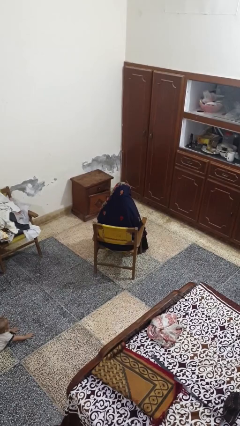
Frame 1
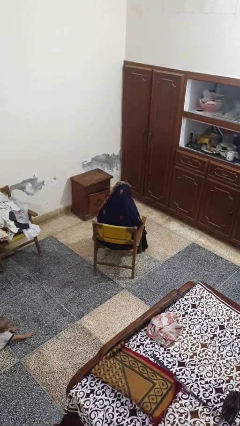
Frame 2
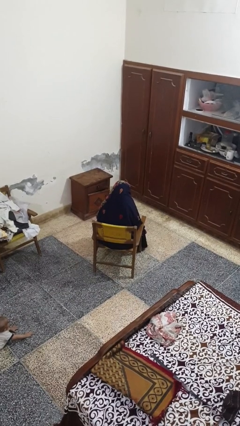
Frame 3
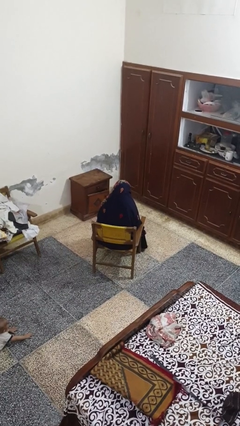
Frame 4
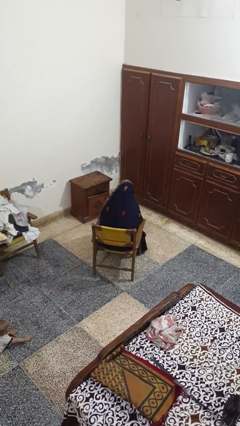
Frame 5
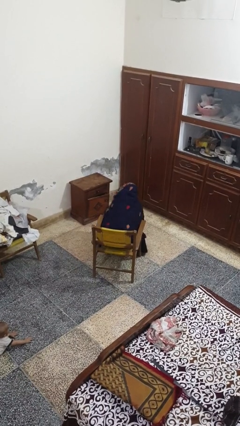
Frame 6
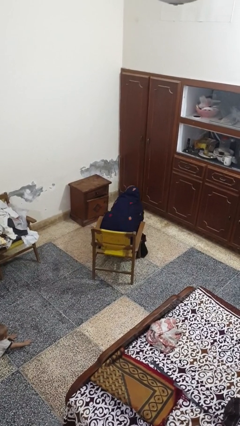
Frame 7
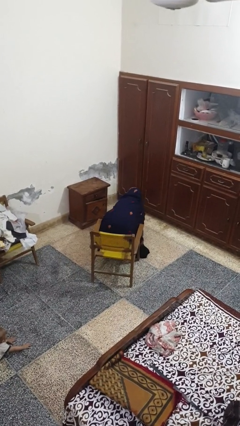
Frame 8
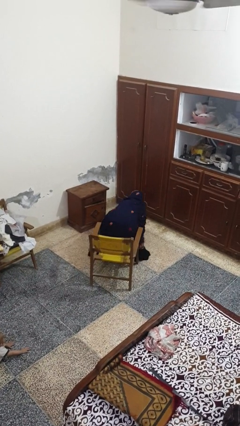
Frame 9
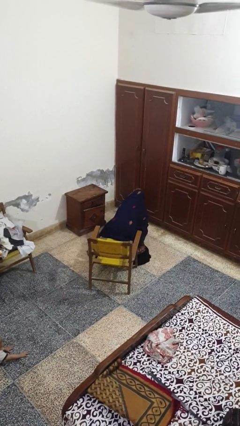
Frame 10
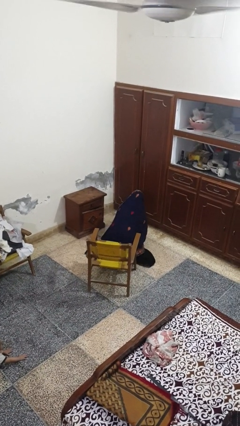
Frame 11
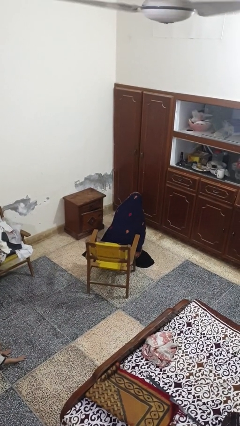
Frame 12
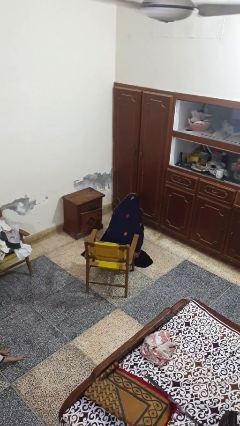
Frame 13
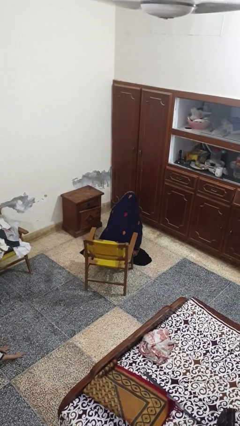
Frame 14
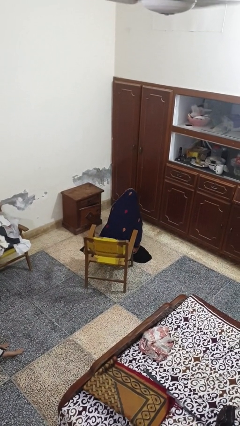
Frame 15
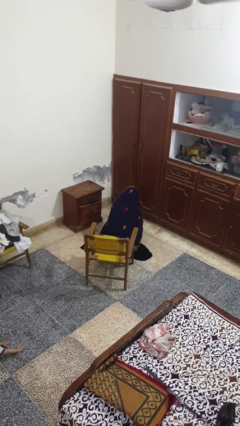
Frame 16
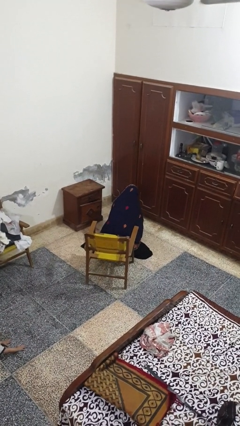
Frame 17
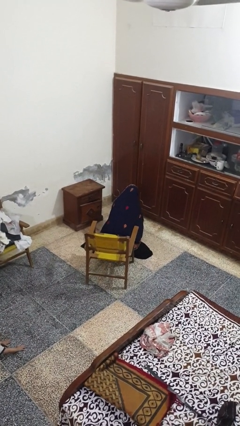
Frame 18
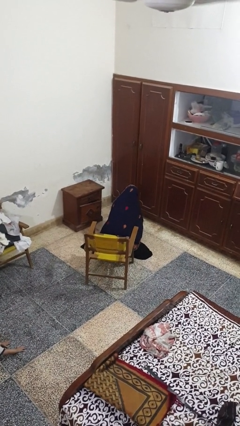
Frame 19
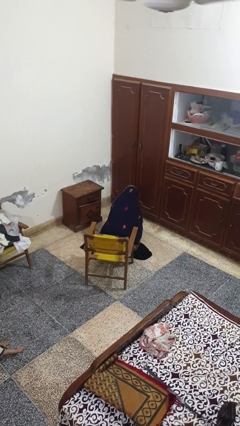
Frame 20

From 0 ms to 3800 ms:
person falls from chair

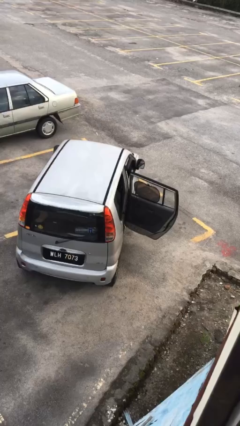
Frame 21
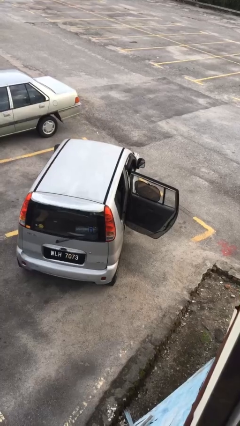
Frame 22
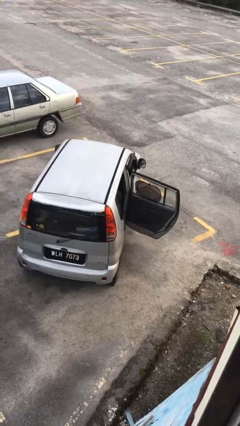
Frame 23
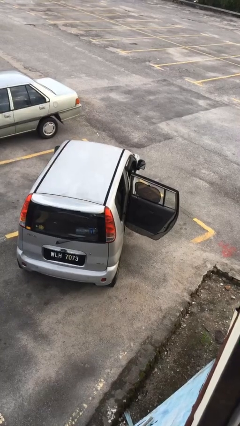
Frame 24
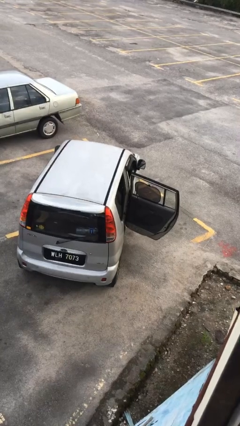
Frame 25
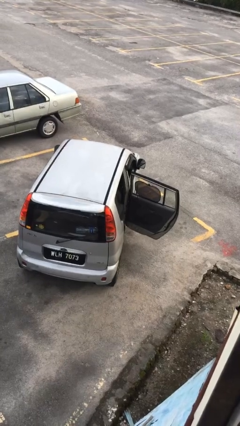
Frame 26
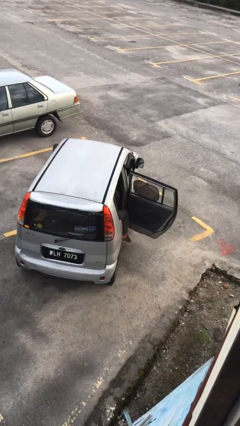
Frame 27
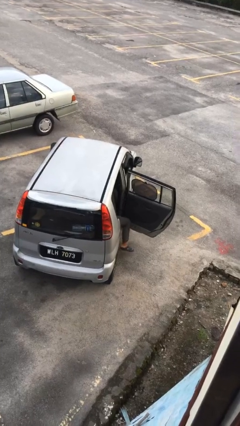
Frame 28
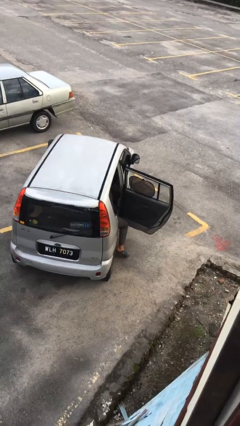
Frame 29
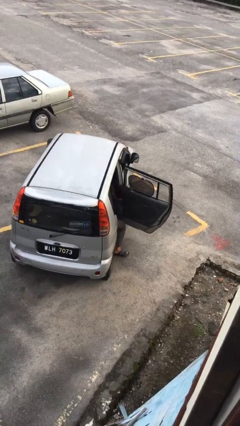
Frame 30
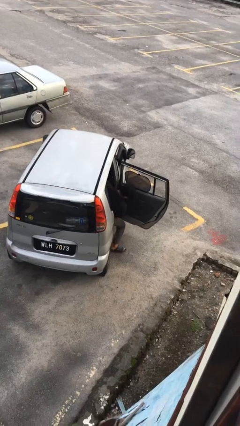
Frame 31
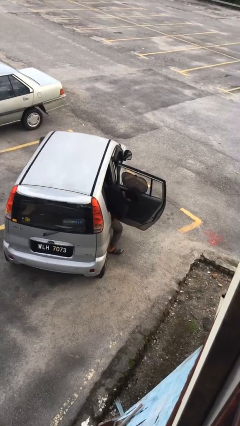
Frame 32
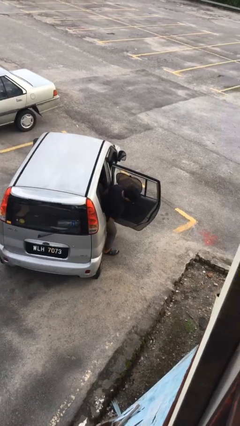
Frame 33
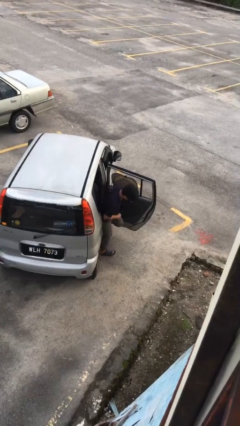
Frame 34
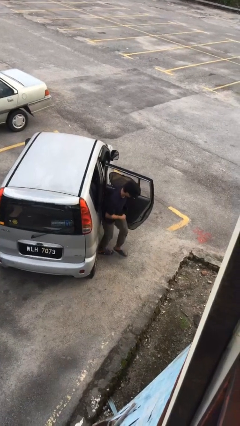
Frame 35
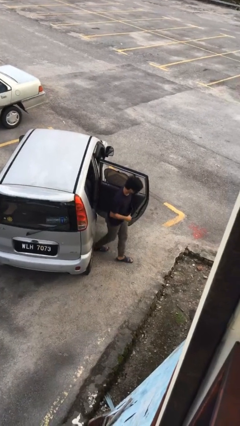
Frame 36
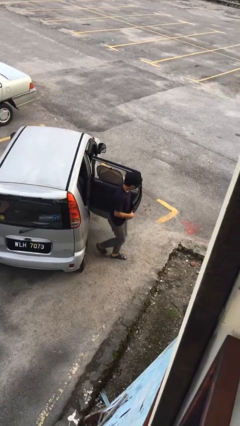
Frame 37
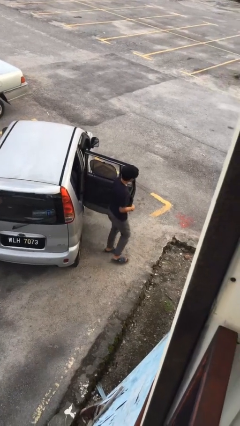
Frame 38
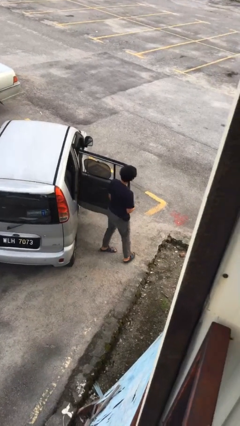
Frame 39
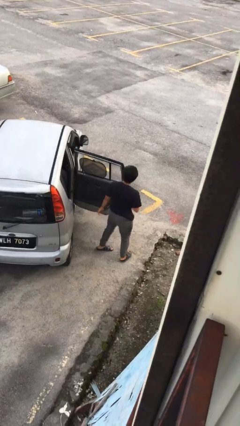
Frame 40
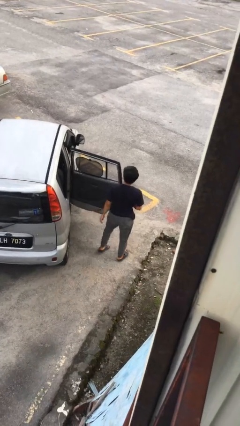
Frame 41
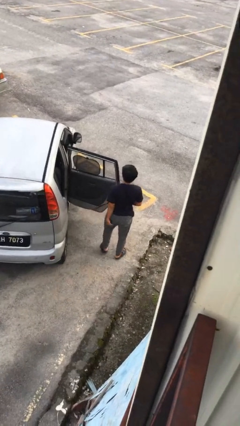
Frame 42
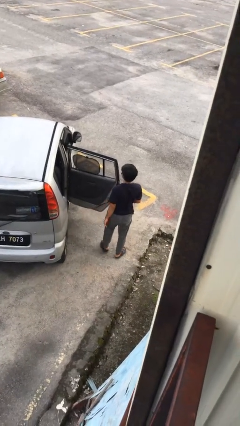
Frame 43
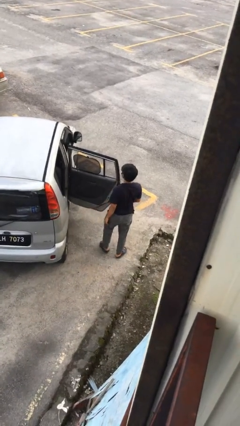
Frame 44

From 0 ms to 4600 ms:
person exits car

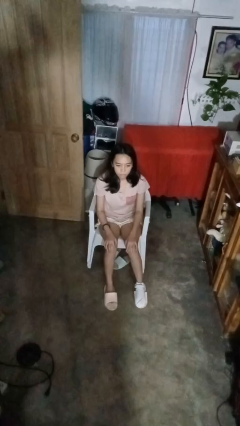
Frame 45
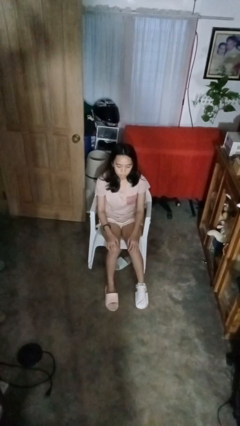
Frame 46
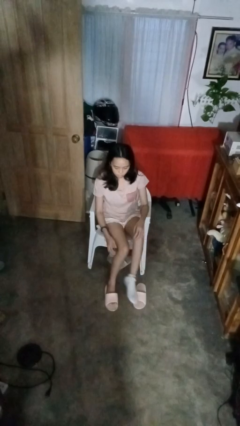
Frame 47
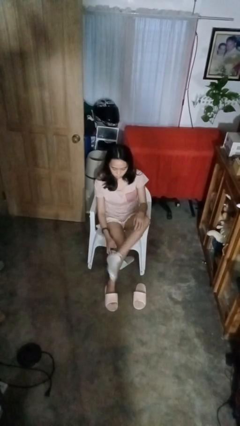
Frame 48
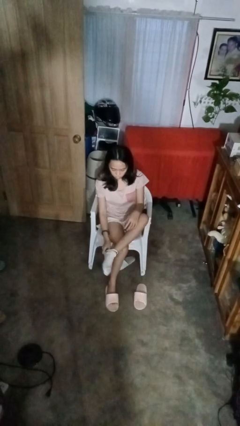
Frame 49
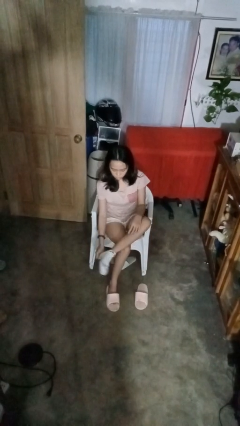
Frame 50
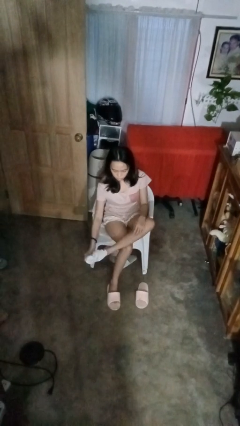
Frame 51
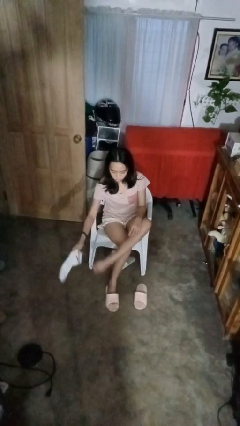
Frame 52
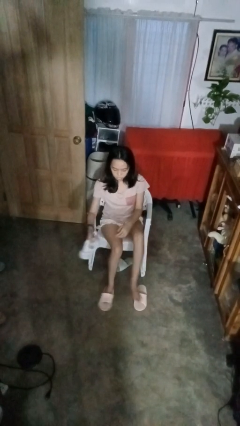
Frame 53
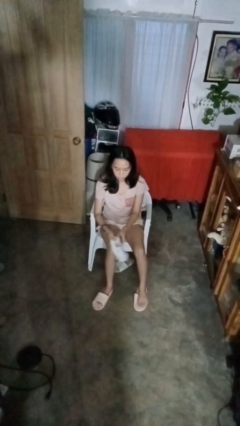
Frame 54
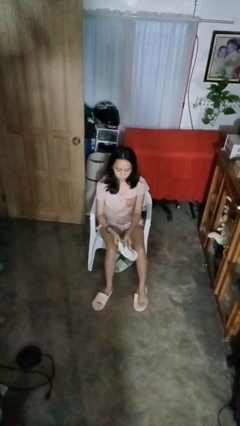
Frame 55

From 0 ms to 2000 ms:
person takes off socks

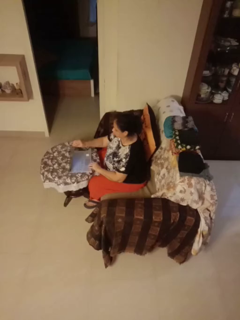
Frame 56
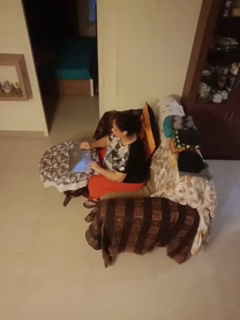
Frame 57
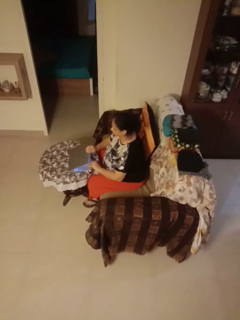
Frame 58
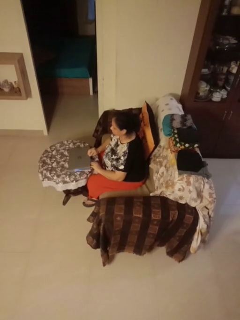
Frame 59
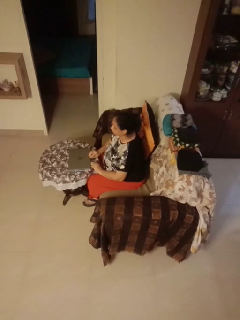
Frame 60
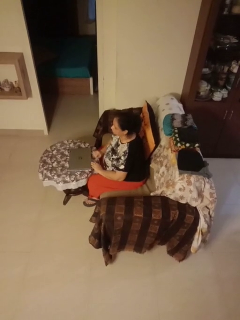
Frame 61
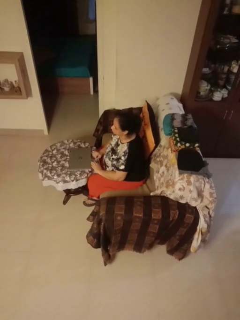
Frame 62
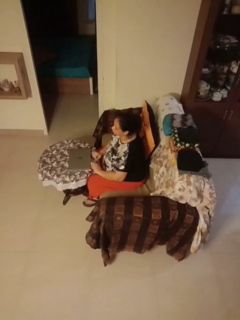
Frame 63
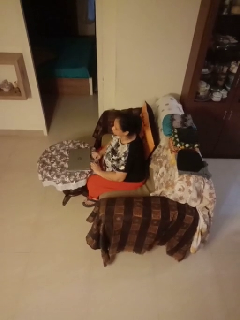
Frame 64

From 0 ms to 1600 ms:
person closes laptop

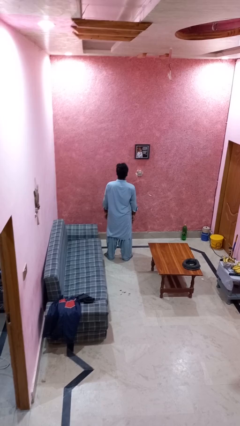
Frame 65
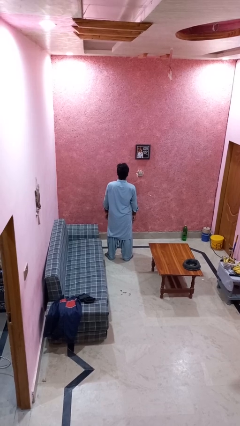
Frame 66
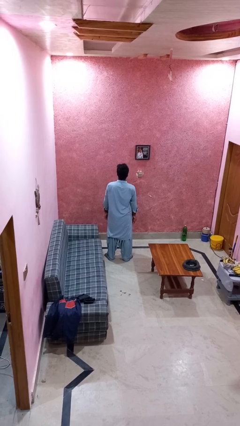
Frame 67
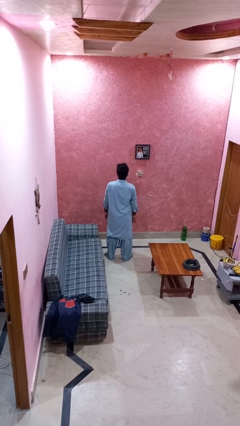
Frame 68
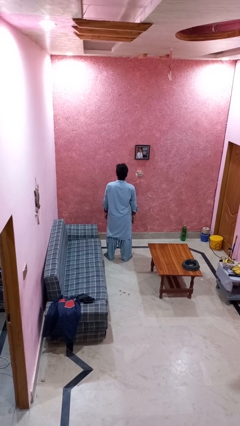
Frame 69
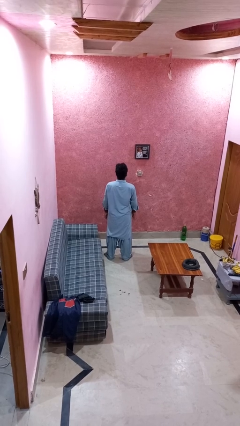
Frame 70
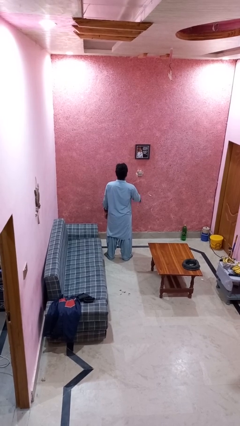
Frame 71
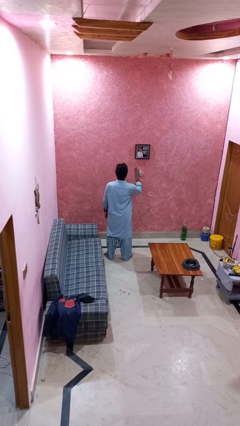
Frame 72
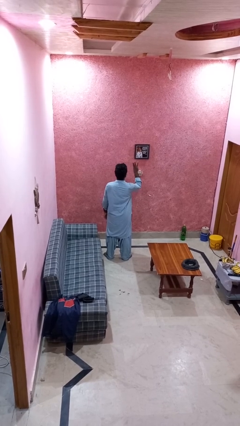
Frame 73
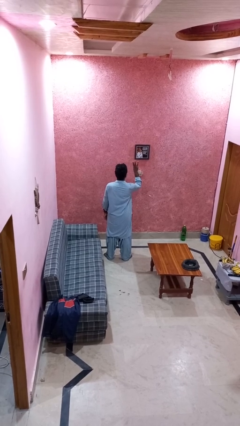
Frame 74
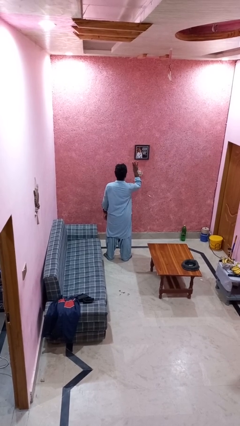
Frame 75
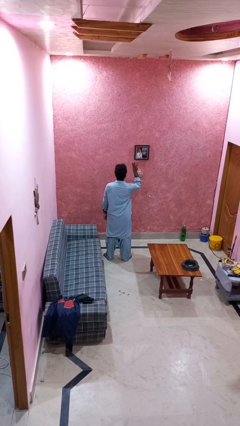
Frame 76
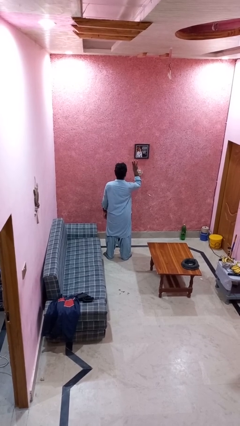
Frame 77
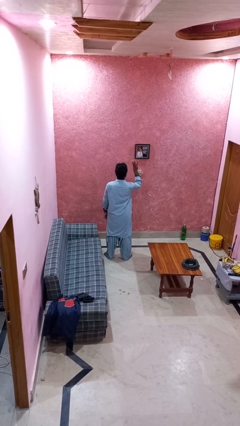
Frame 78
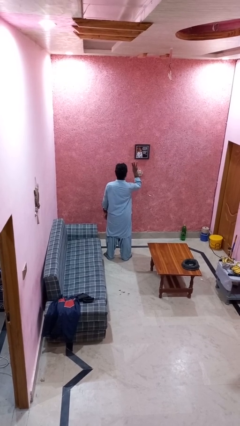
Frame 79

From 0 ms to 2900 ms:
person gestures number three

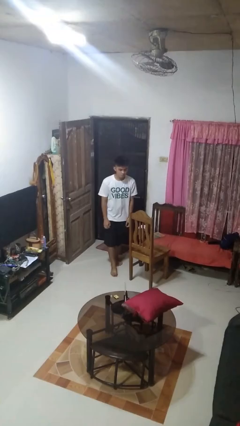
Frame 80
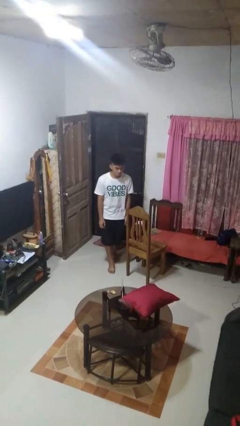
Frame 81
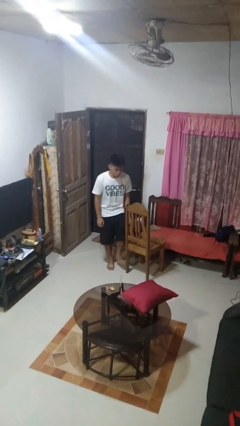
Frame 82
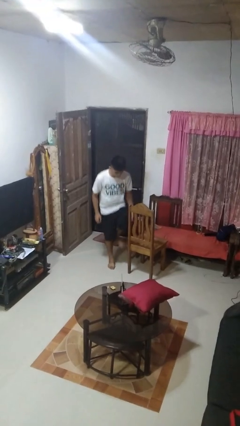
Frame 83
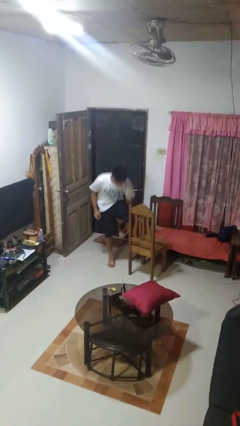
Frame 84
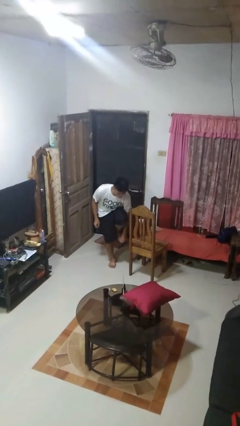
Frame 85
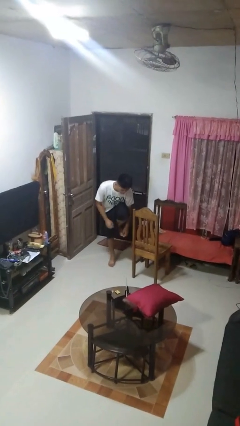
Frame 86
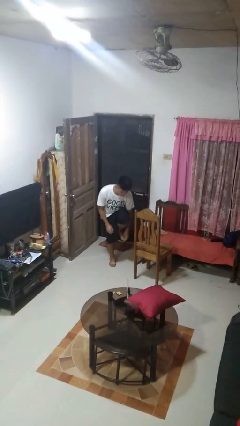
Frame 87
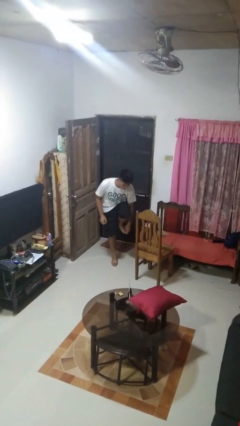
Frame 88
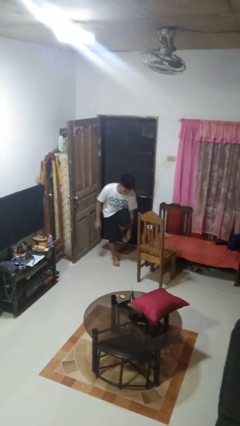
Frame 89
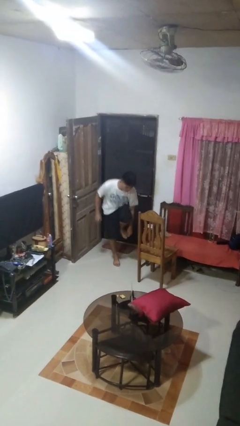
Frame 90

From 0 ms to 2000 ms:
person stubs toe

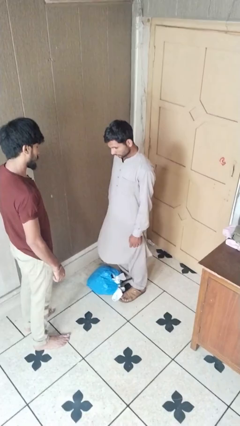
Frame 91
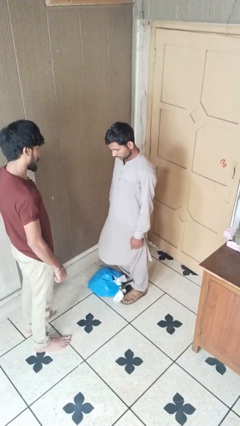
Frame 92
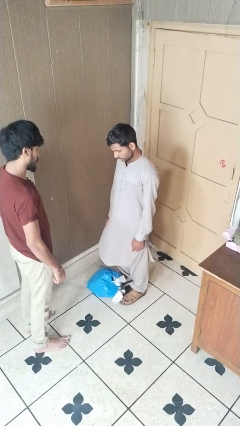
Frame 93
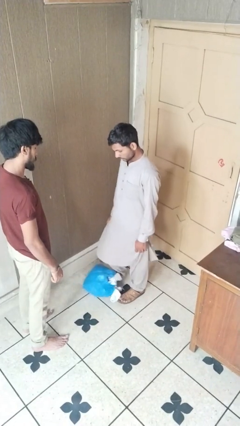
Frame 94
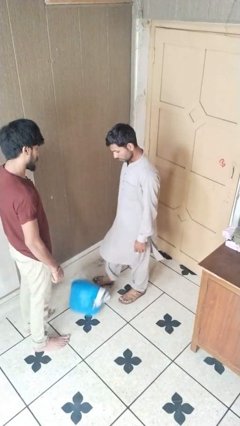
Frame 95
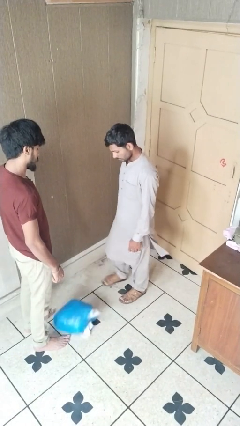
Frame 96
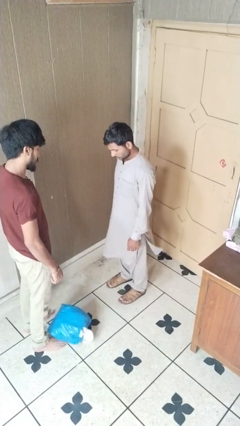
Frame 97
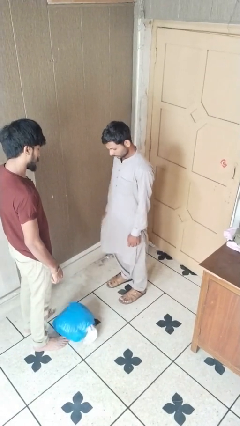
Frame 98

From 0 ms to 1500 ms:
person kicks object to person
